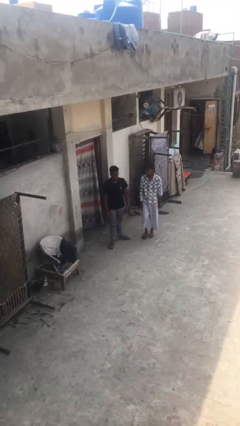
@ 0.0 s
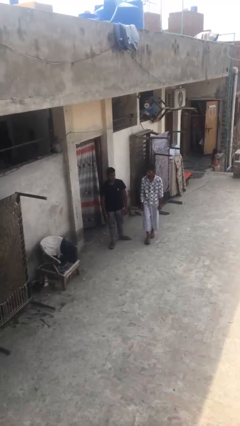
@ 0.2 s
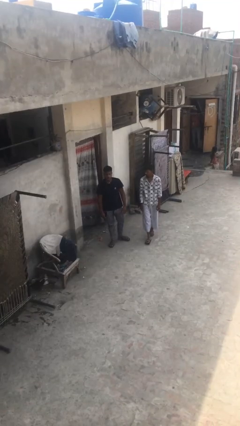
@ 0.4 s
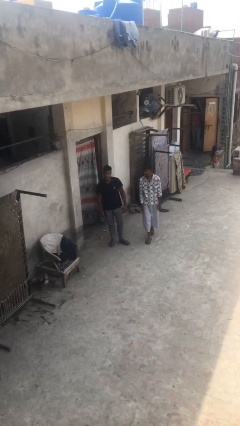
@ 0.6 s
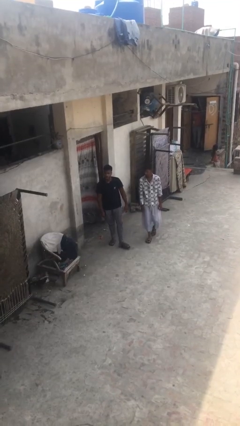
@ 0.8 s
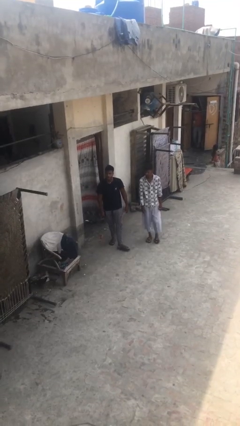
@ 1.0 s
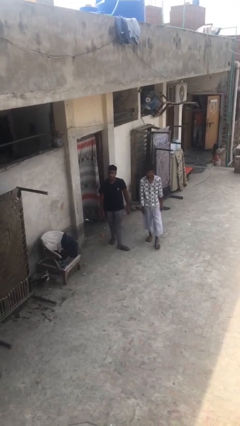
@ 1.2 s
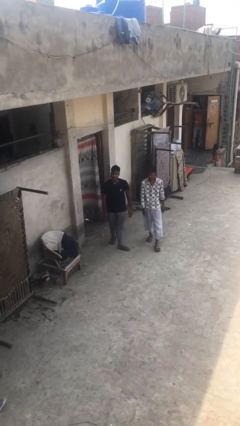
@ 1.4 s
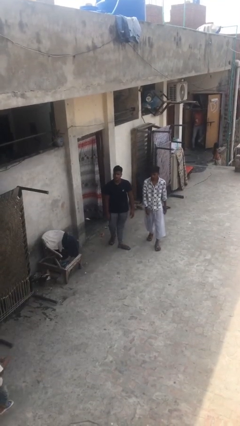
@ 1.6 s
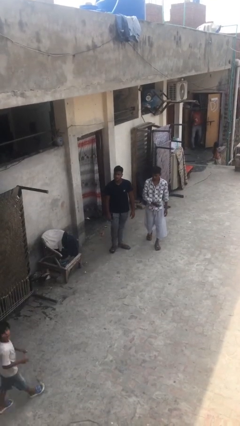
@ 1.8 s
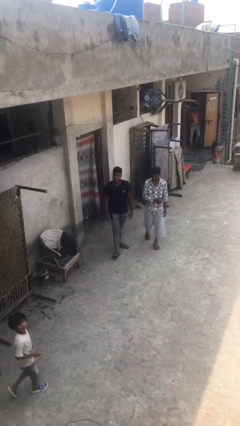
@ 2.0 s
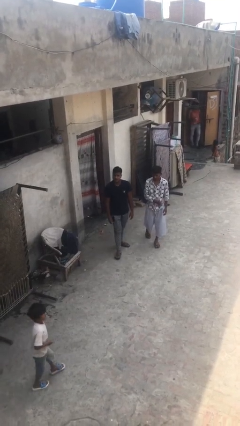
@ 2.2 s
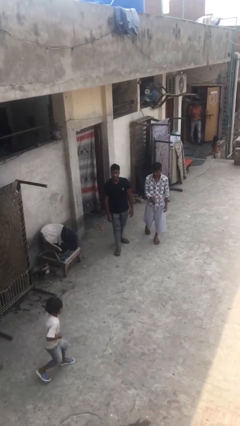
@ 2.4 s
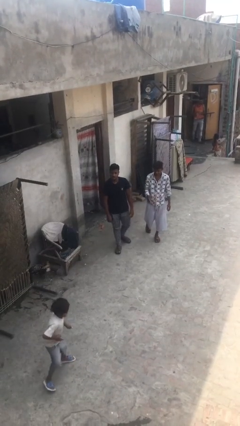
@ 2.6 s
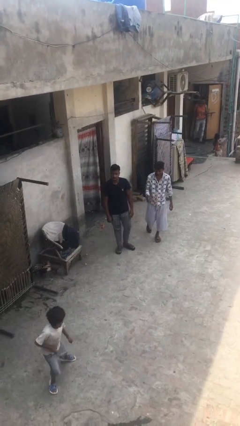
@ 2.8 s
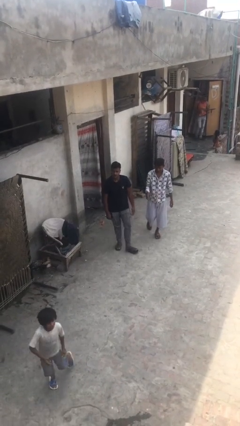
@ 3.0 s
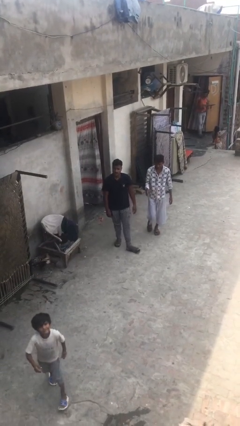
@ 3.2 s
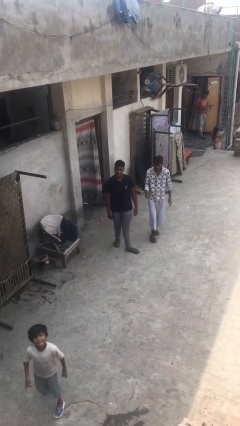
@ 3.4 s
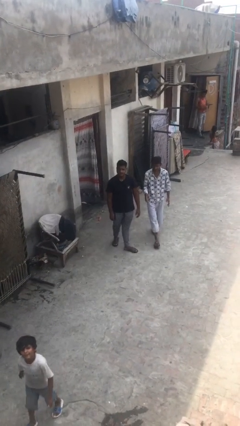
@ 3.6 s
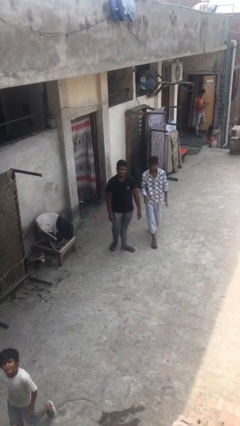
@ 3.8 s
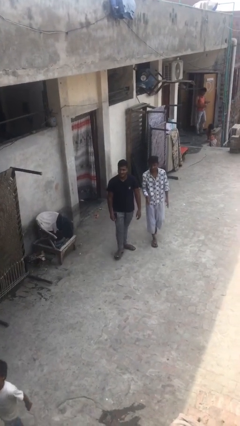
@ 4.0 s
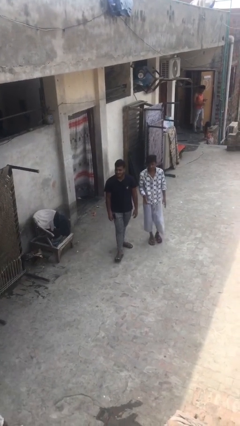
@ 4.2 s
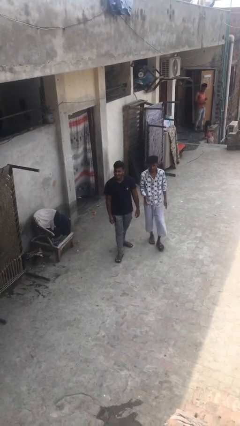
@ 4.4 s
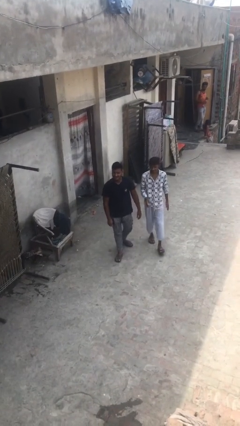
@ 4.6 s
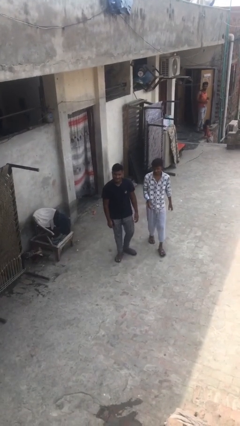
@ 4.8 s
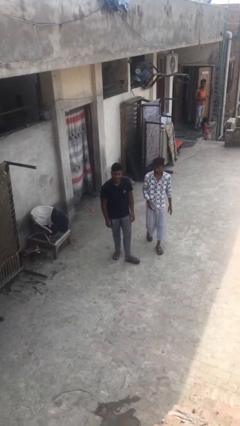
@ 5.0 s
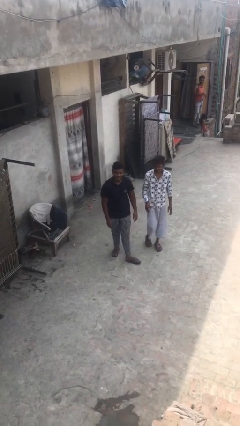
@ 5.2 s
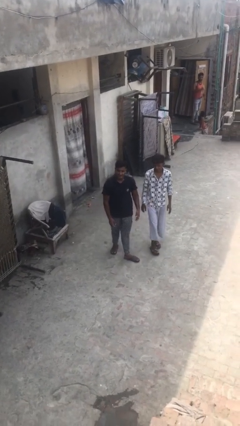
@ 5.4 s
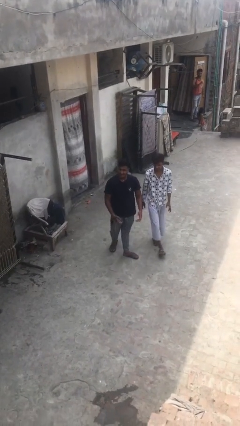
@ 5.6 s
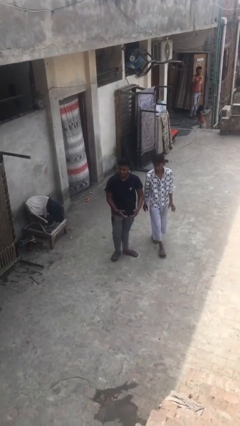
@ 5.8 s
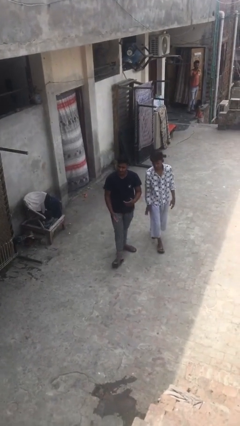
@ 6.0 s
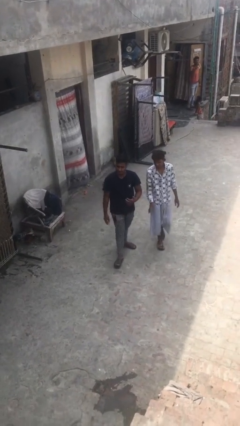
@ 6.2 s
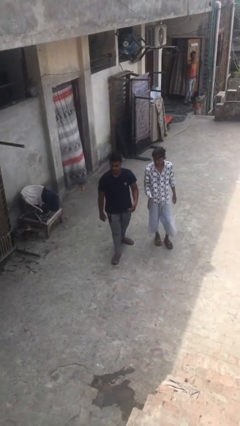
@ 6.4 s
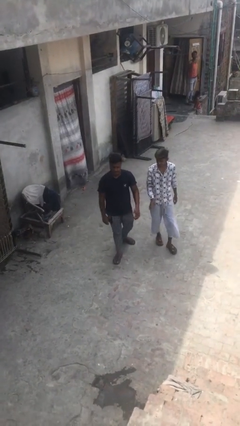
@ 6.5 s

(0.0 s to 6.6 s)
person talks to person

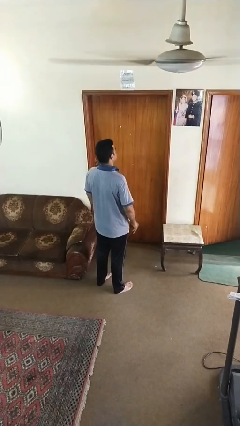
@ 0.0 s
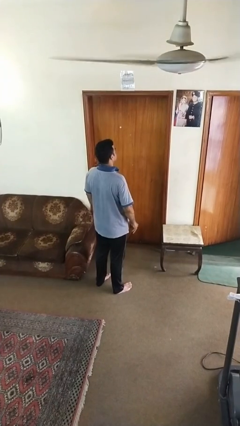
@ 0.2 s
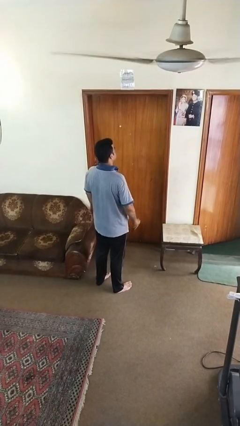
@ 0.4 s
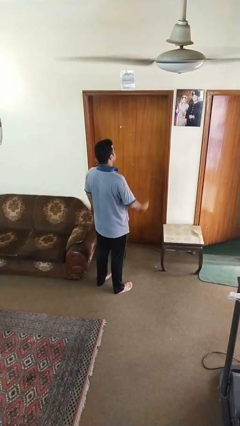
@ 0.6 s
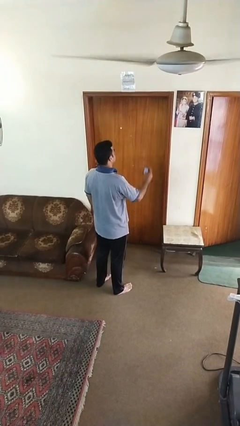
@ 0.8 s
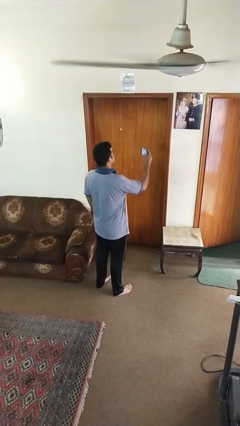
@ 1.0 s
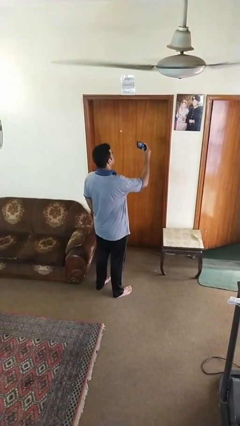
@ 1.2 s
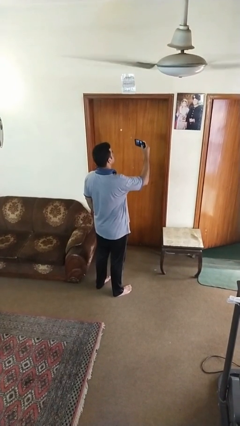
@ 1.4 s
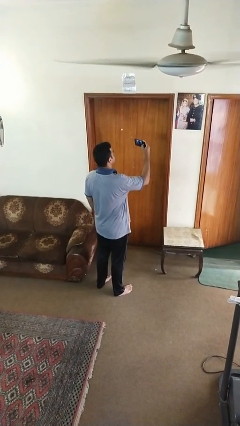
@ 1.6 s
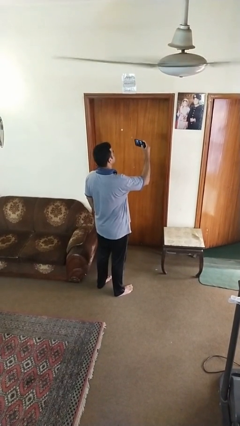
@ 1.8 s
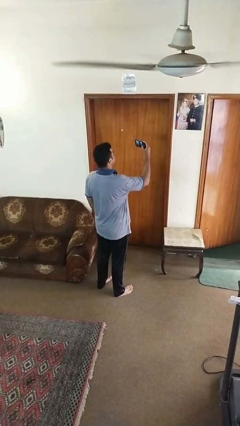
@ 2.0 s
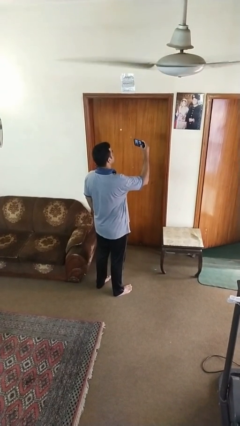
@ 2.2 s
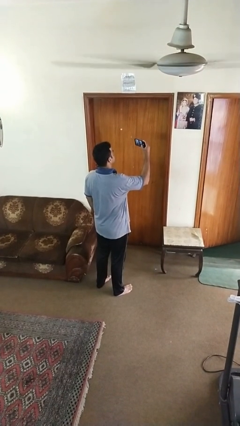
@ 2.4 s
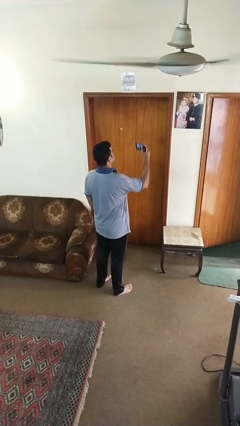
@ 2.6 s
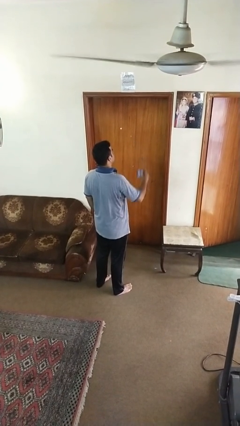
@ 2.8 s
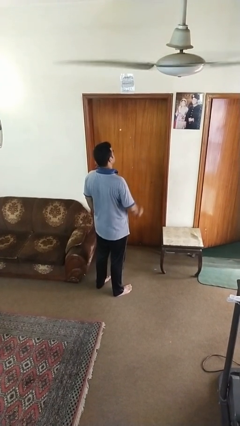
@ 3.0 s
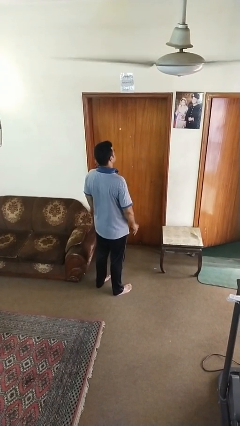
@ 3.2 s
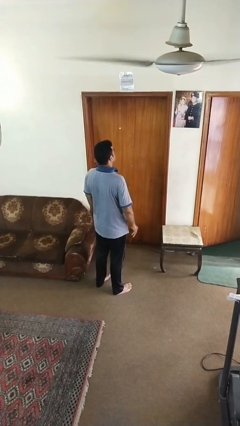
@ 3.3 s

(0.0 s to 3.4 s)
person takes selfie

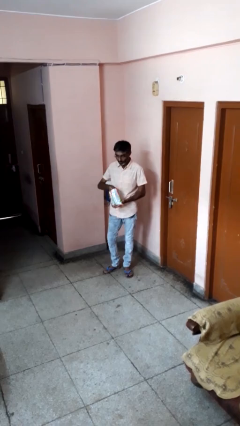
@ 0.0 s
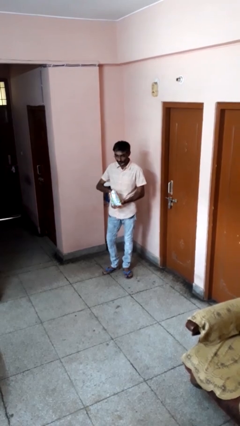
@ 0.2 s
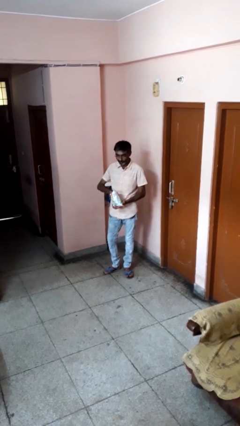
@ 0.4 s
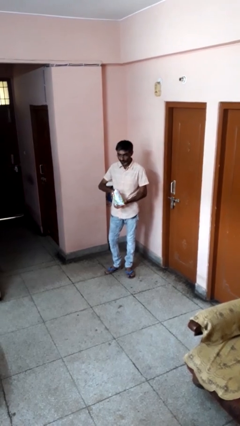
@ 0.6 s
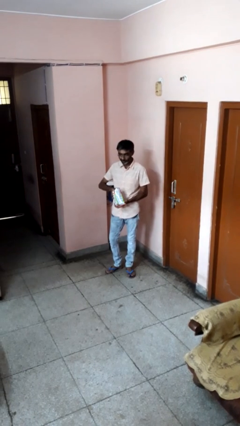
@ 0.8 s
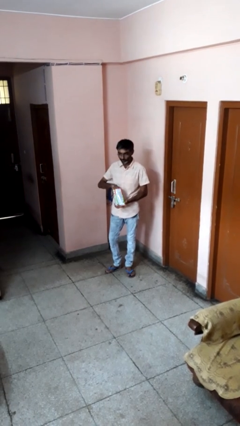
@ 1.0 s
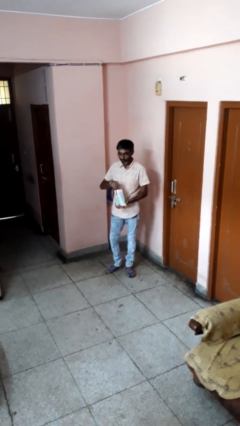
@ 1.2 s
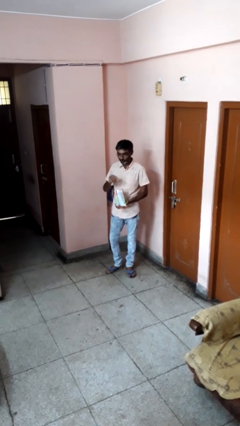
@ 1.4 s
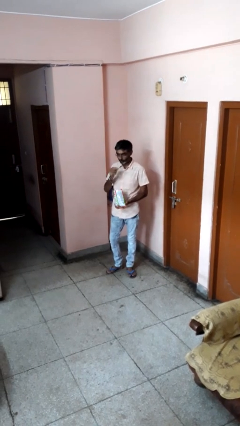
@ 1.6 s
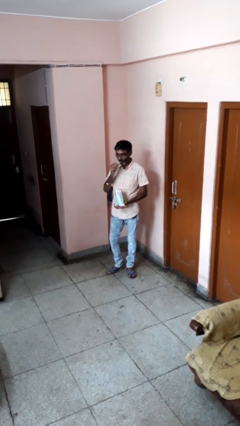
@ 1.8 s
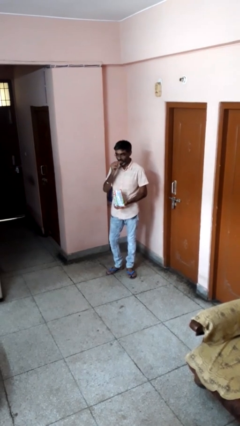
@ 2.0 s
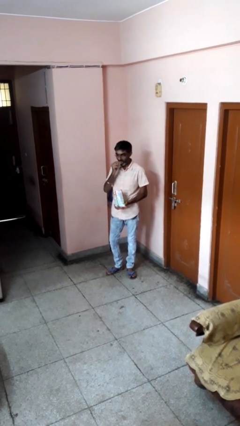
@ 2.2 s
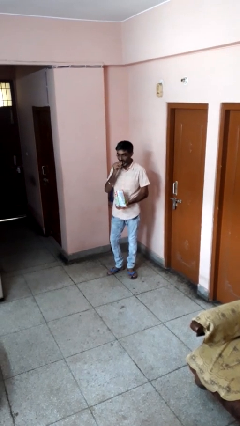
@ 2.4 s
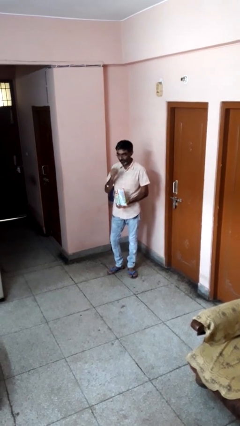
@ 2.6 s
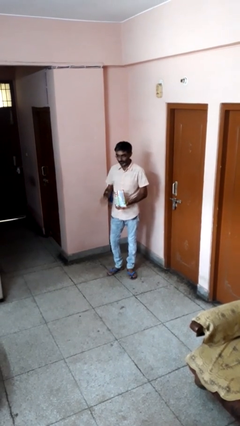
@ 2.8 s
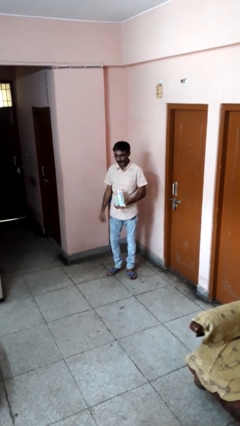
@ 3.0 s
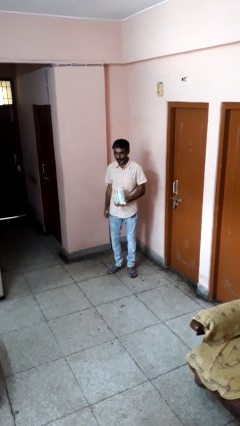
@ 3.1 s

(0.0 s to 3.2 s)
person eats snack from bag

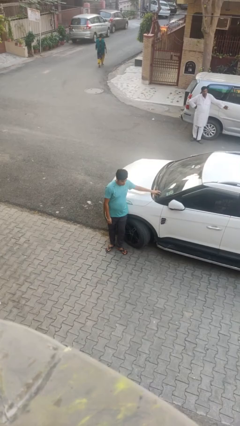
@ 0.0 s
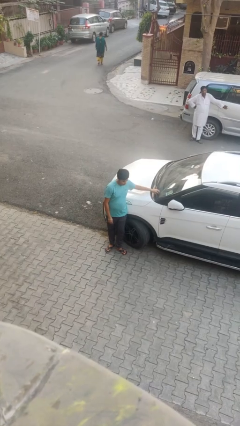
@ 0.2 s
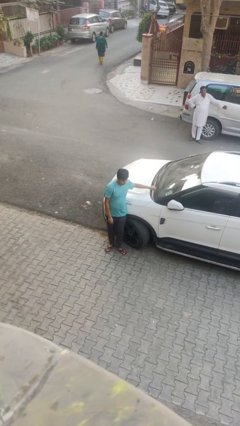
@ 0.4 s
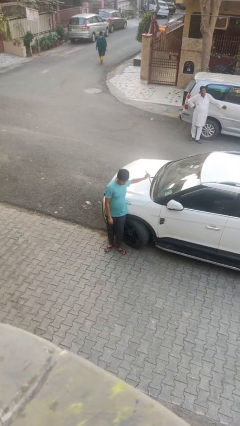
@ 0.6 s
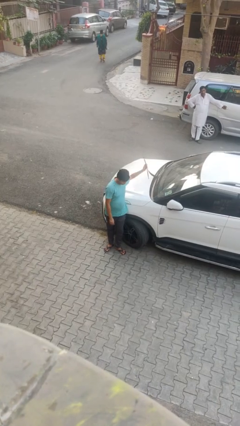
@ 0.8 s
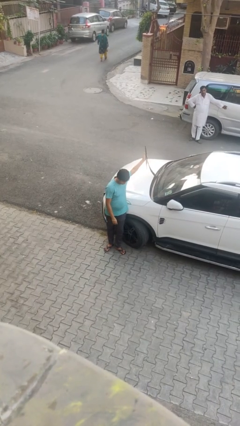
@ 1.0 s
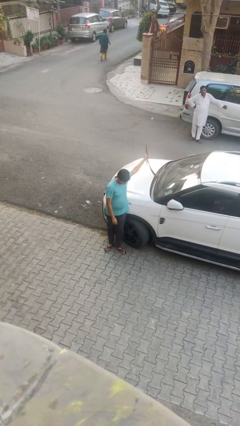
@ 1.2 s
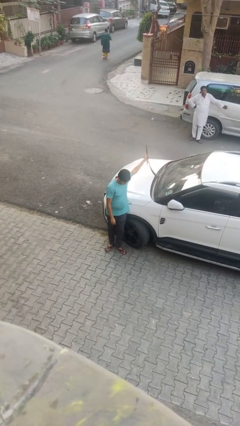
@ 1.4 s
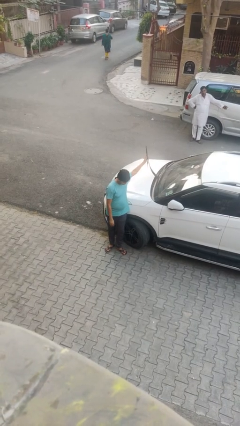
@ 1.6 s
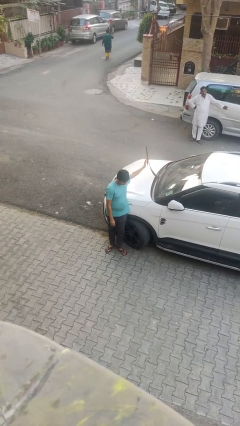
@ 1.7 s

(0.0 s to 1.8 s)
person flips up car wipers

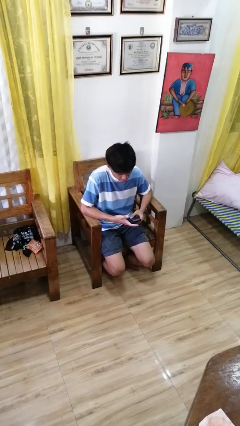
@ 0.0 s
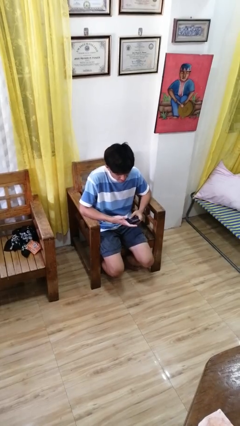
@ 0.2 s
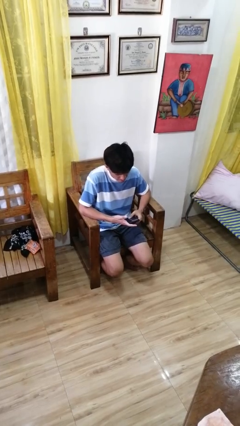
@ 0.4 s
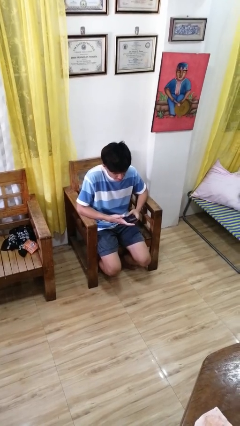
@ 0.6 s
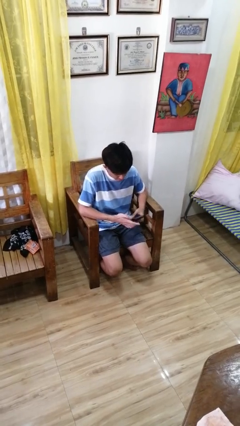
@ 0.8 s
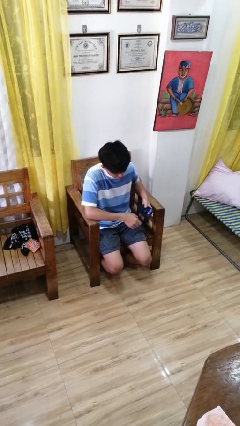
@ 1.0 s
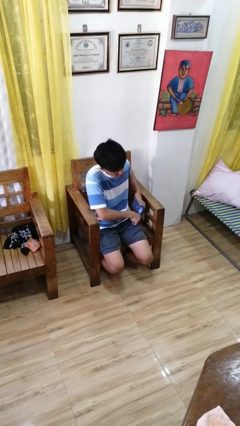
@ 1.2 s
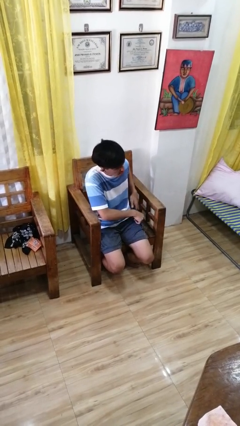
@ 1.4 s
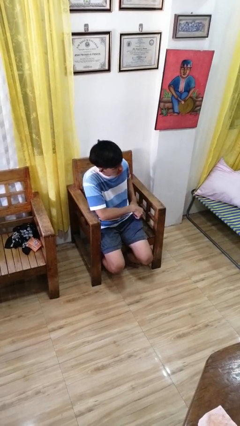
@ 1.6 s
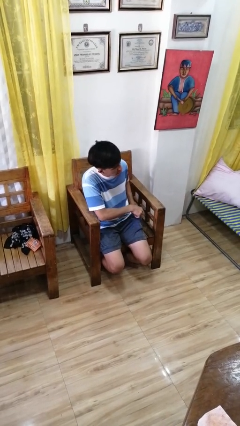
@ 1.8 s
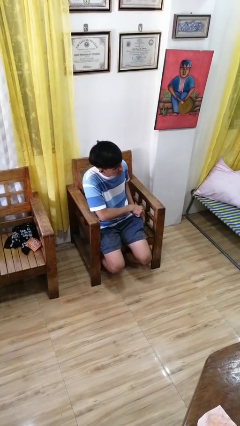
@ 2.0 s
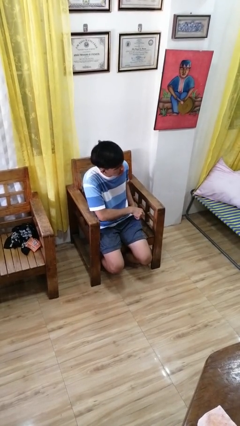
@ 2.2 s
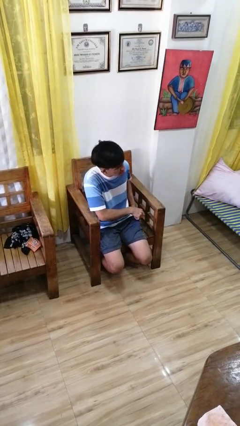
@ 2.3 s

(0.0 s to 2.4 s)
person puts phone into pocket

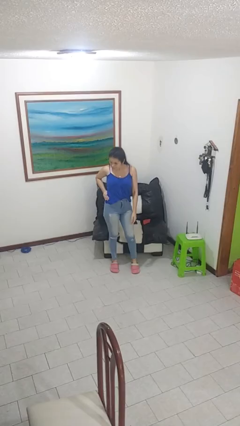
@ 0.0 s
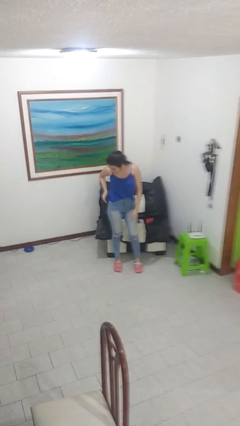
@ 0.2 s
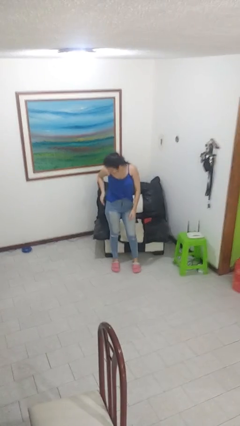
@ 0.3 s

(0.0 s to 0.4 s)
person swats bug
